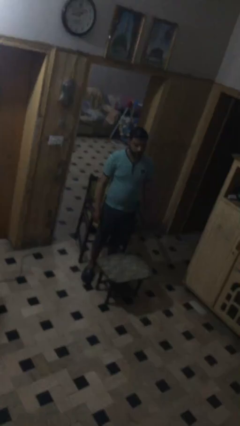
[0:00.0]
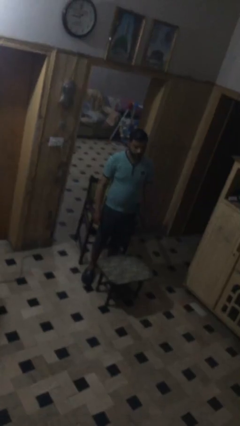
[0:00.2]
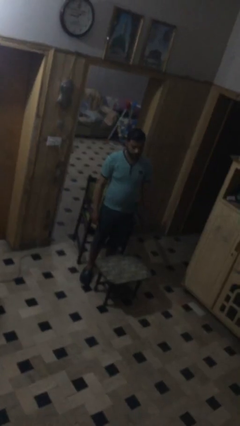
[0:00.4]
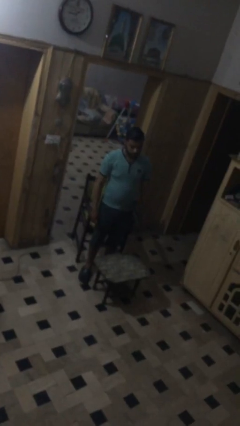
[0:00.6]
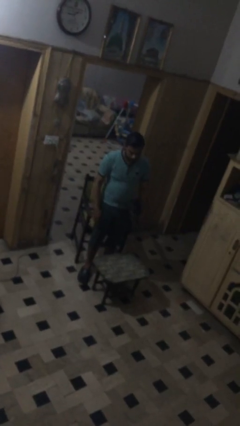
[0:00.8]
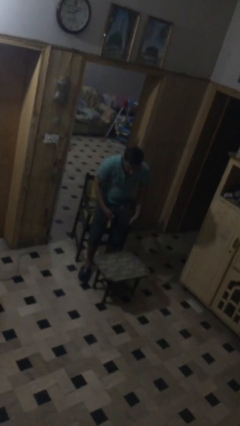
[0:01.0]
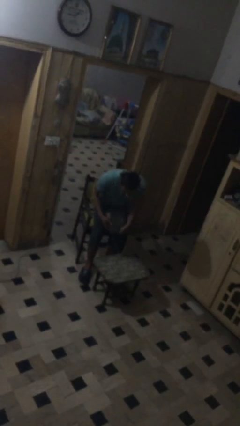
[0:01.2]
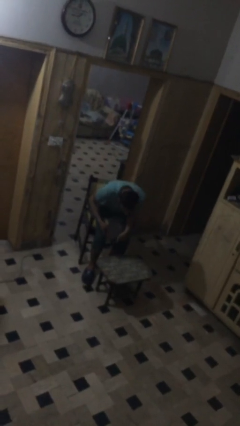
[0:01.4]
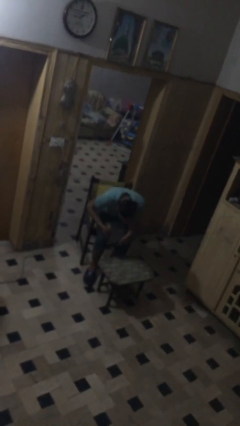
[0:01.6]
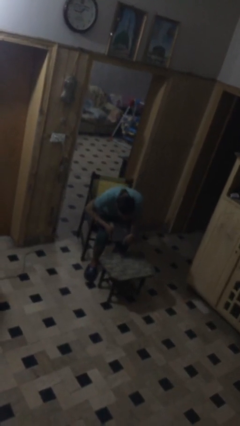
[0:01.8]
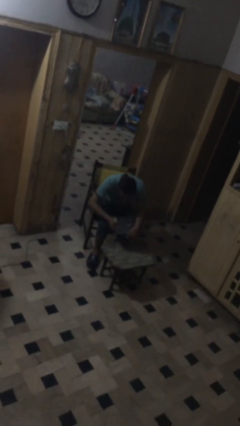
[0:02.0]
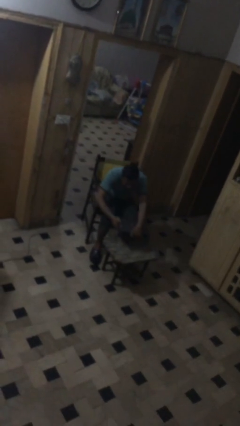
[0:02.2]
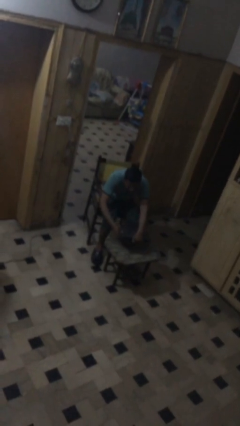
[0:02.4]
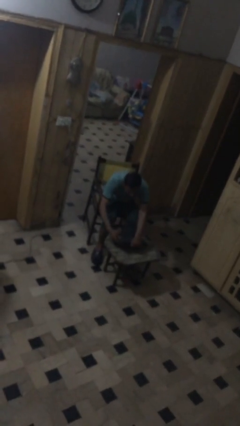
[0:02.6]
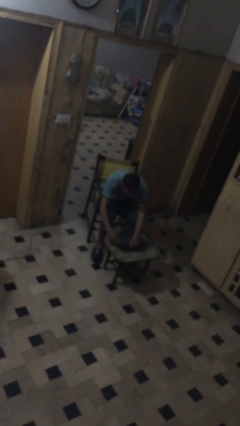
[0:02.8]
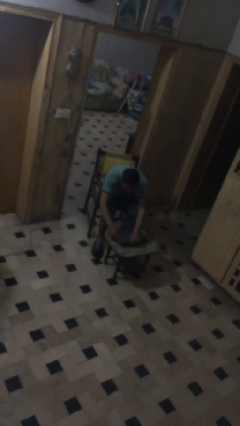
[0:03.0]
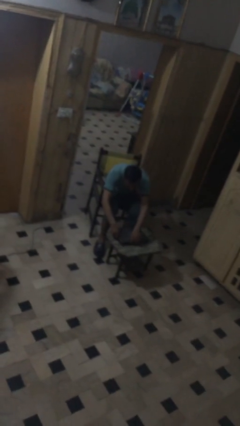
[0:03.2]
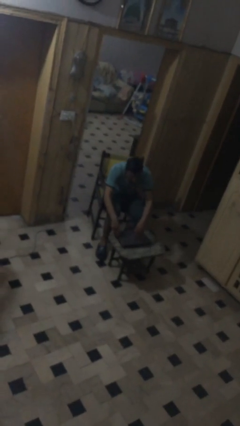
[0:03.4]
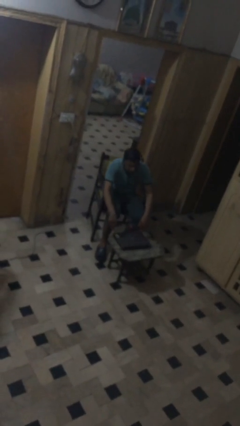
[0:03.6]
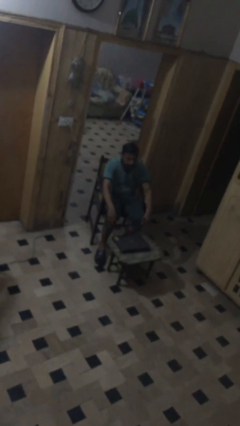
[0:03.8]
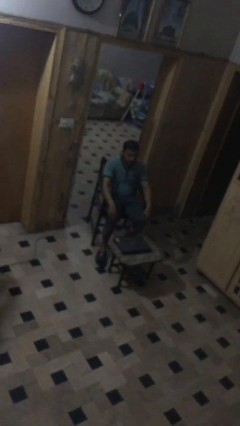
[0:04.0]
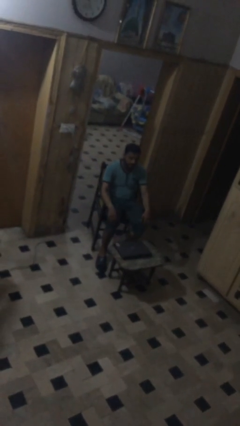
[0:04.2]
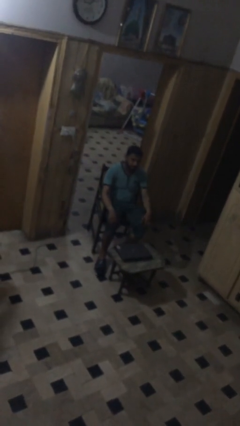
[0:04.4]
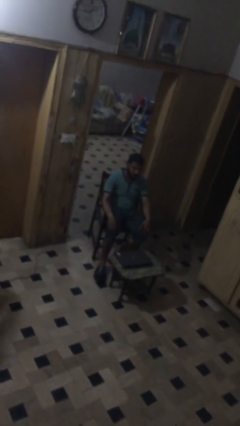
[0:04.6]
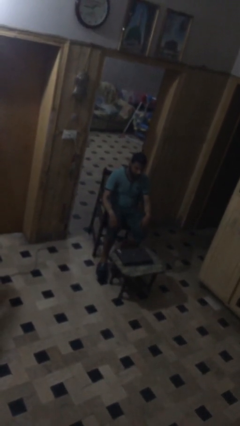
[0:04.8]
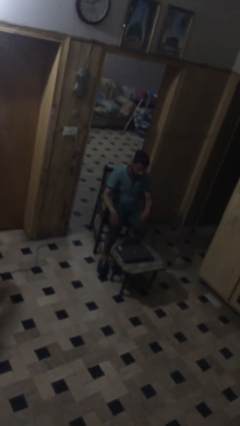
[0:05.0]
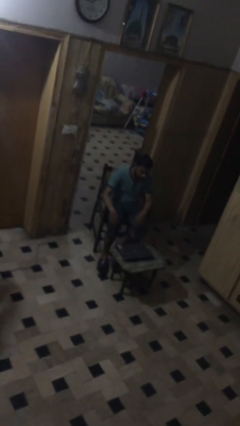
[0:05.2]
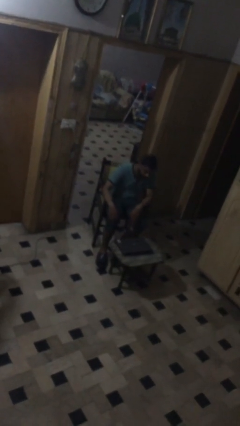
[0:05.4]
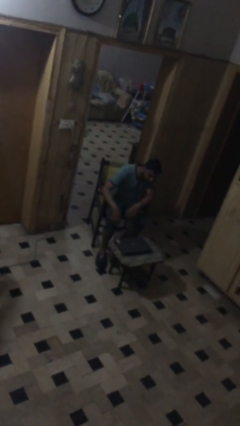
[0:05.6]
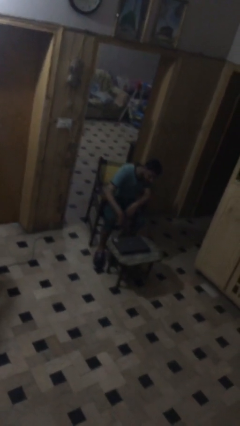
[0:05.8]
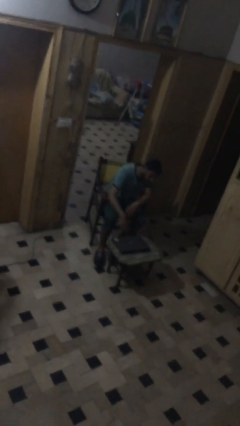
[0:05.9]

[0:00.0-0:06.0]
person sits down

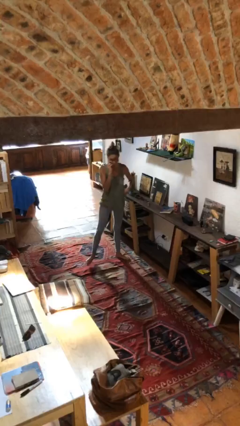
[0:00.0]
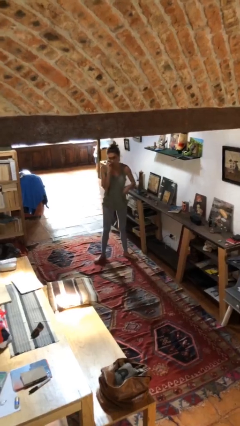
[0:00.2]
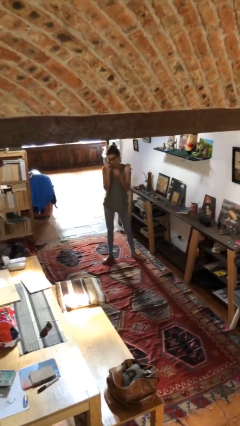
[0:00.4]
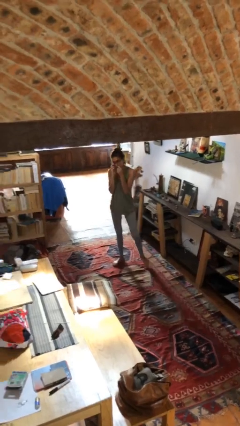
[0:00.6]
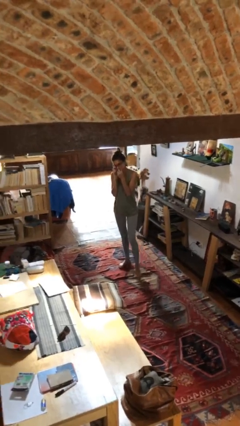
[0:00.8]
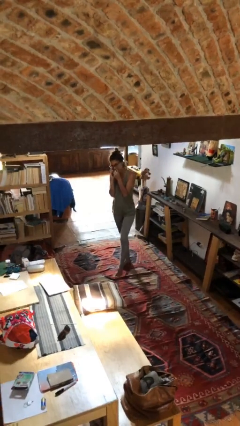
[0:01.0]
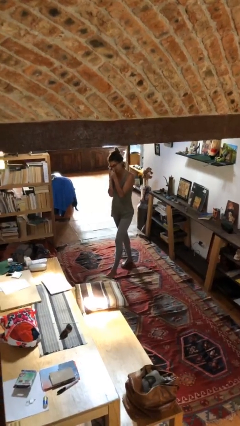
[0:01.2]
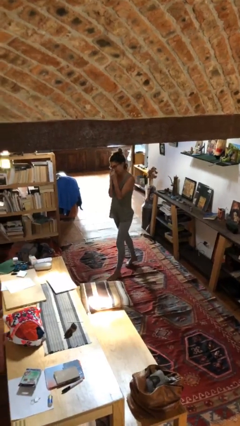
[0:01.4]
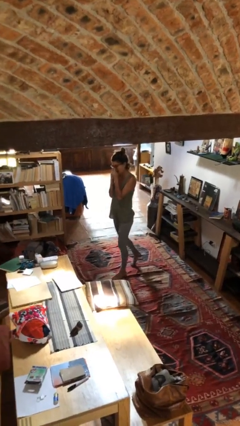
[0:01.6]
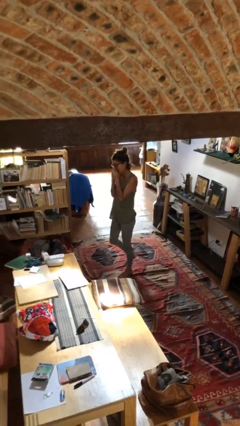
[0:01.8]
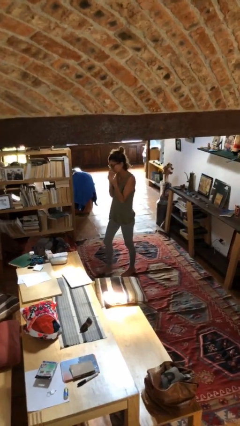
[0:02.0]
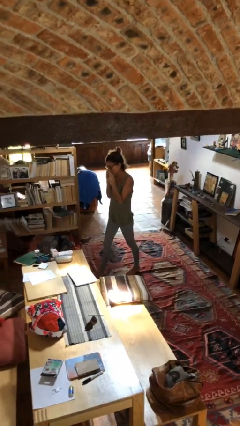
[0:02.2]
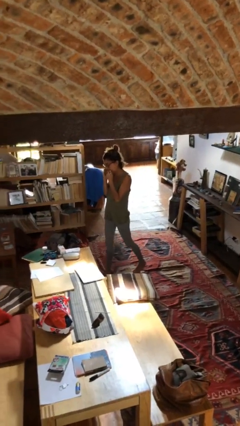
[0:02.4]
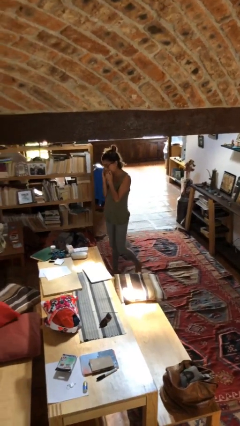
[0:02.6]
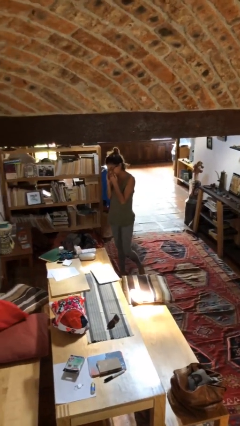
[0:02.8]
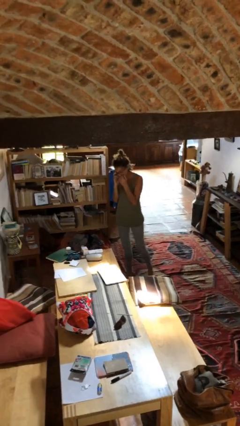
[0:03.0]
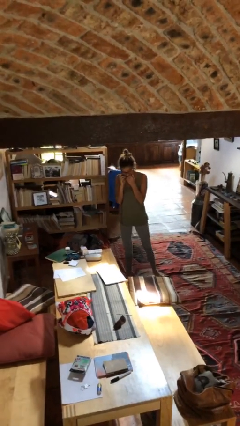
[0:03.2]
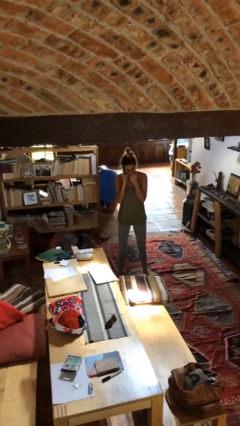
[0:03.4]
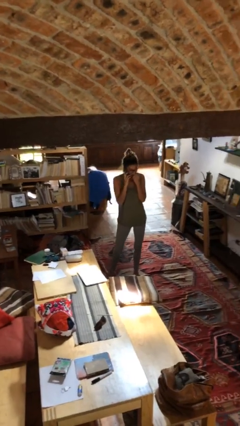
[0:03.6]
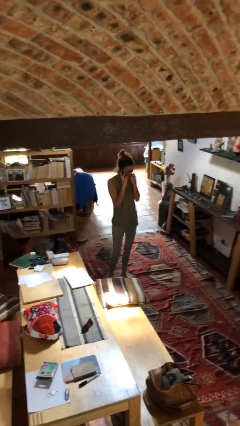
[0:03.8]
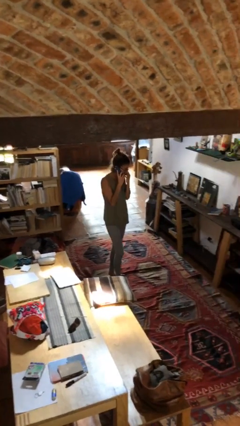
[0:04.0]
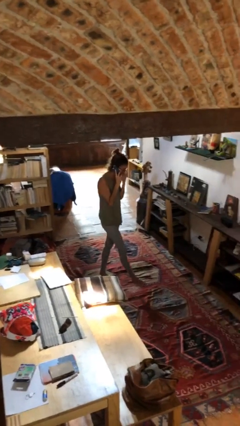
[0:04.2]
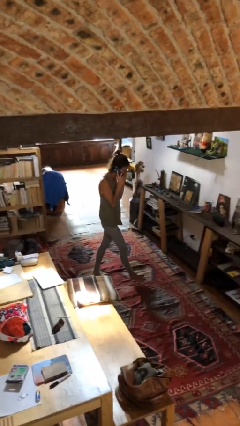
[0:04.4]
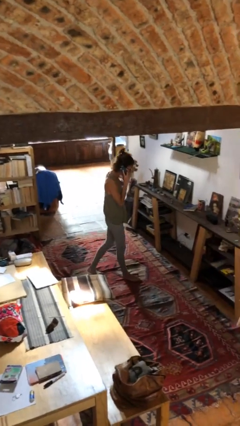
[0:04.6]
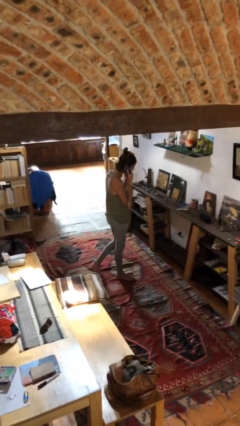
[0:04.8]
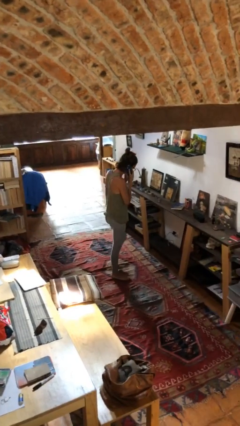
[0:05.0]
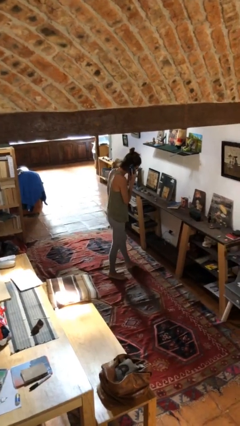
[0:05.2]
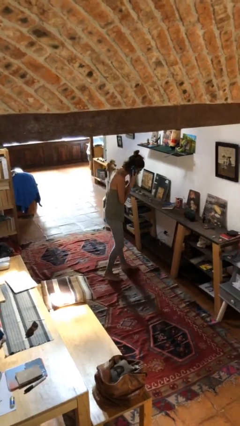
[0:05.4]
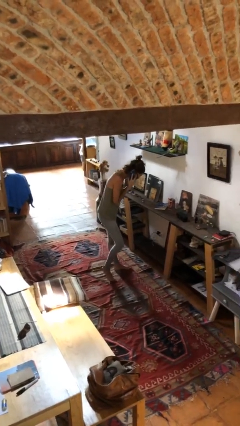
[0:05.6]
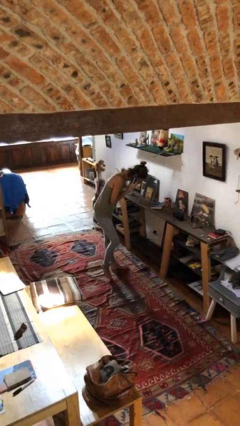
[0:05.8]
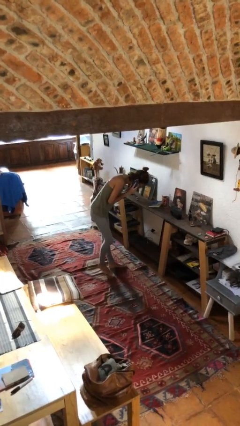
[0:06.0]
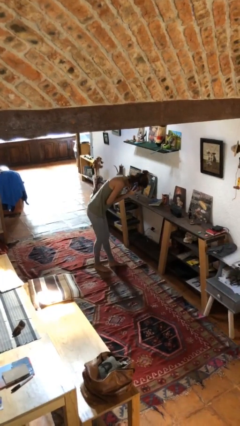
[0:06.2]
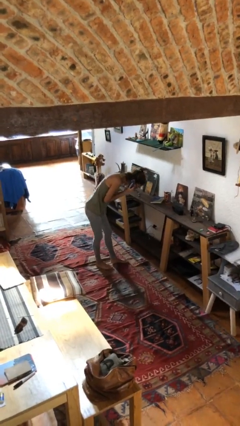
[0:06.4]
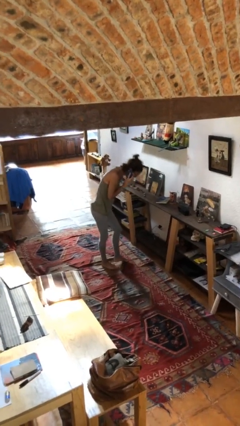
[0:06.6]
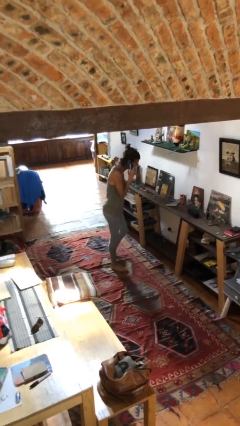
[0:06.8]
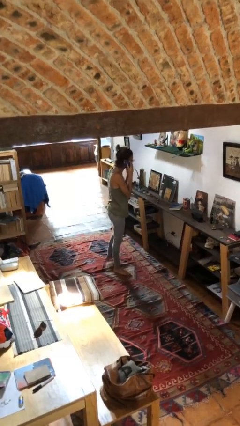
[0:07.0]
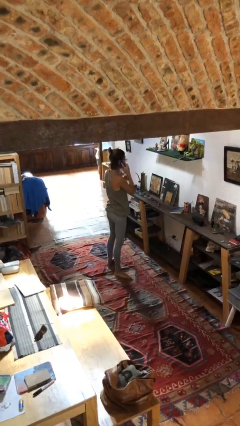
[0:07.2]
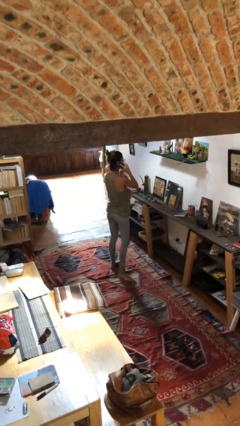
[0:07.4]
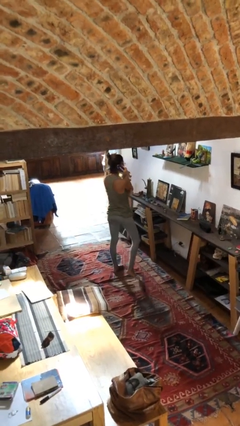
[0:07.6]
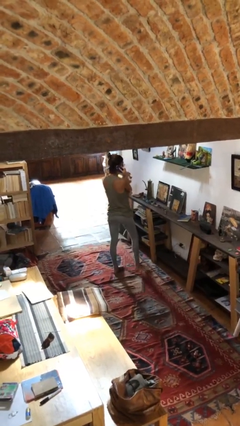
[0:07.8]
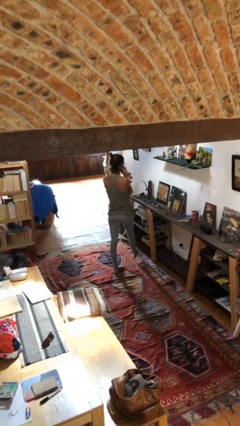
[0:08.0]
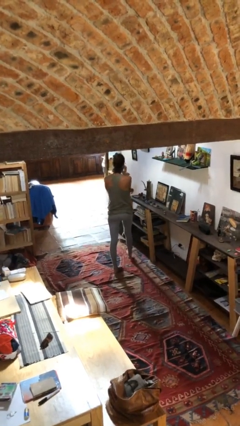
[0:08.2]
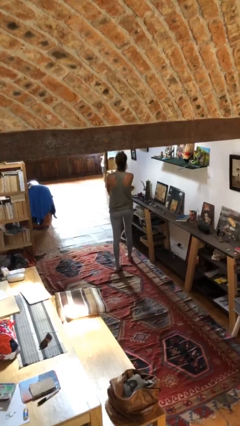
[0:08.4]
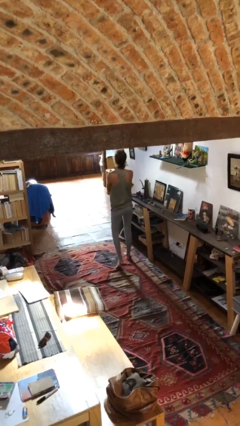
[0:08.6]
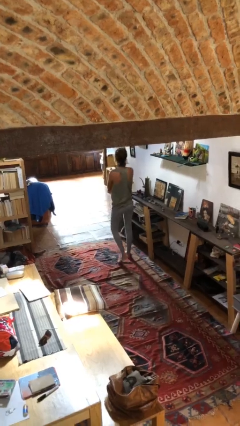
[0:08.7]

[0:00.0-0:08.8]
person talks on phone

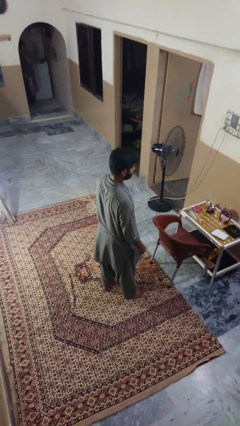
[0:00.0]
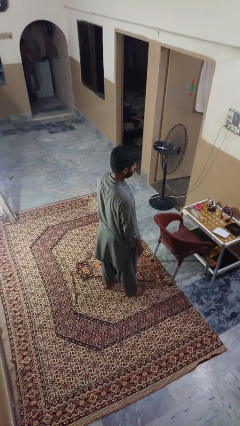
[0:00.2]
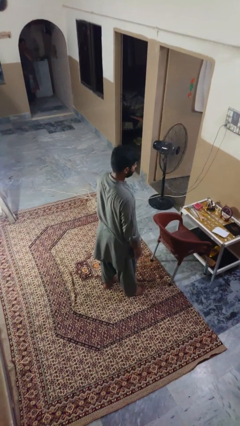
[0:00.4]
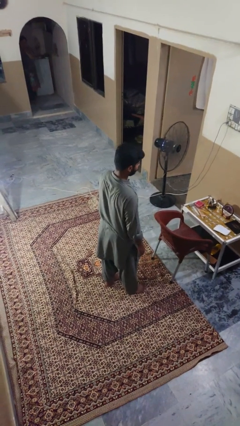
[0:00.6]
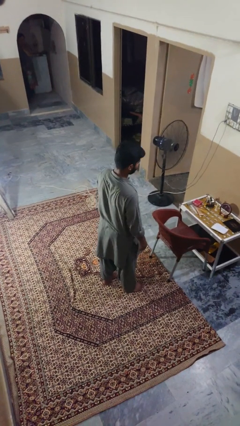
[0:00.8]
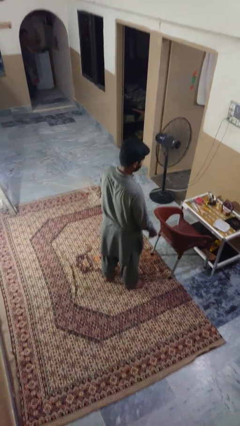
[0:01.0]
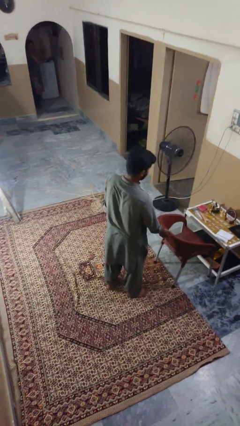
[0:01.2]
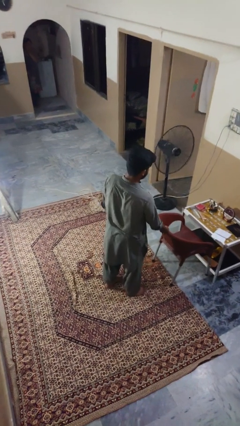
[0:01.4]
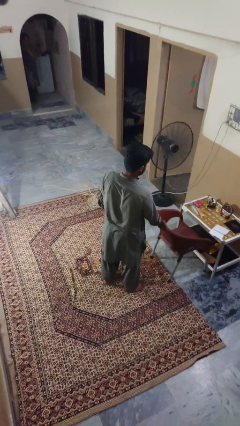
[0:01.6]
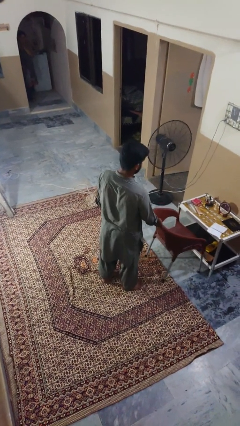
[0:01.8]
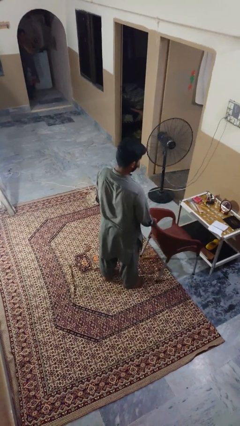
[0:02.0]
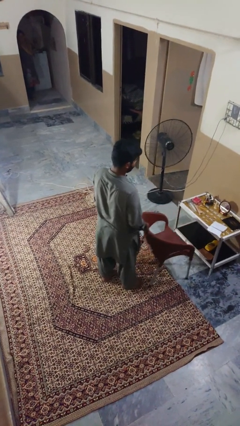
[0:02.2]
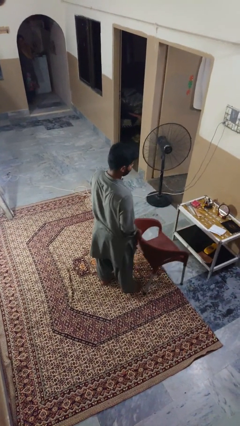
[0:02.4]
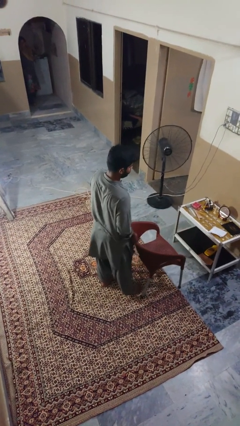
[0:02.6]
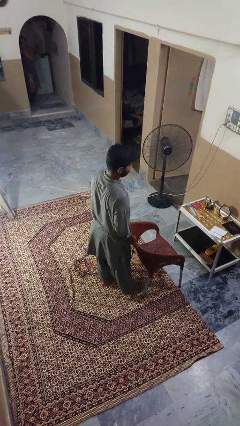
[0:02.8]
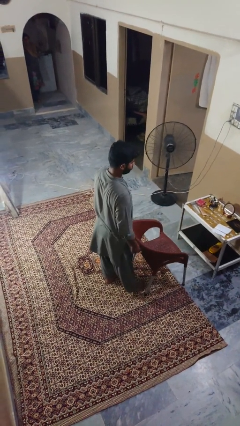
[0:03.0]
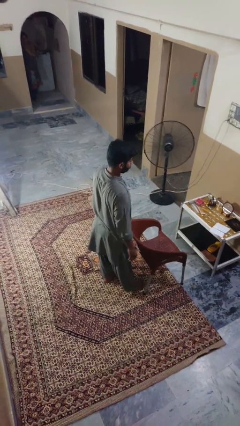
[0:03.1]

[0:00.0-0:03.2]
person pulls out chair
